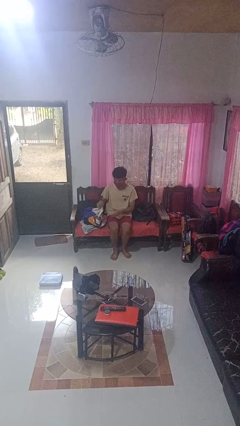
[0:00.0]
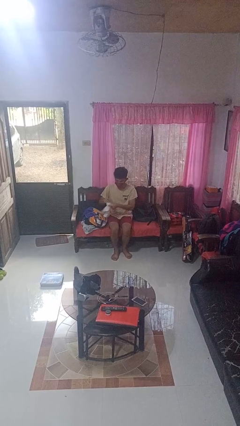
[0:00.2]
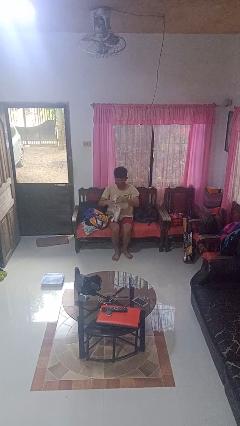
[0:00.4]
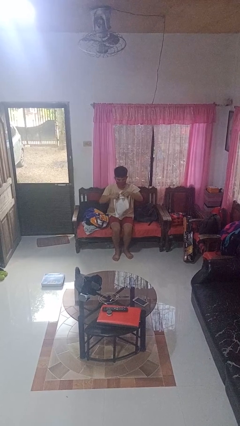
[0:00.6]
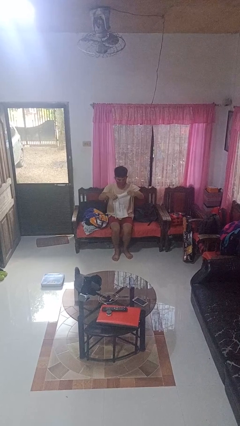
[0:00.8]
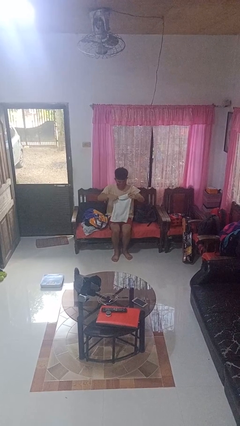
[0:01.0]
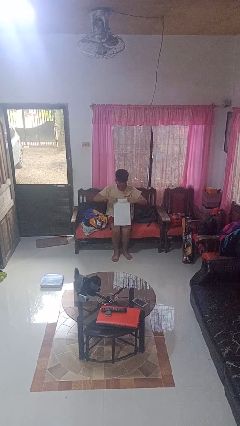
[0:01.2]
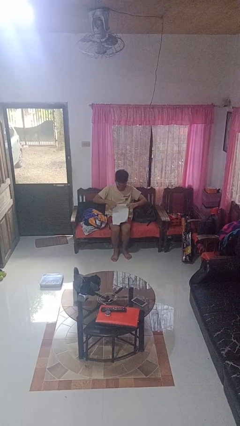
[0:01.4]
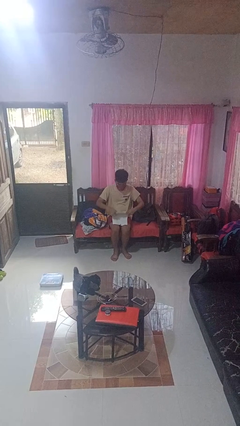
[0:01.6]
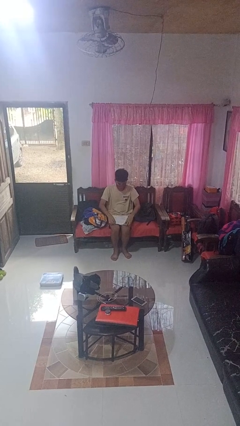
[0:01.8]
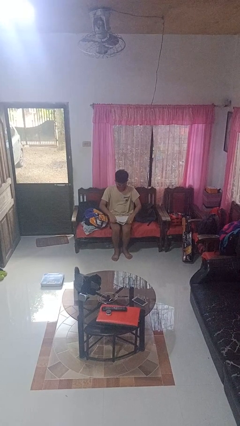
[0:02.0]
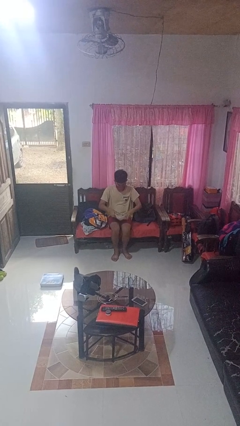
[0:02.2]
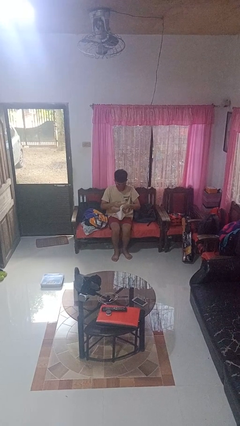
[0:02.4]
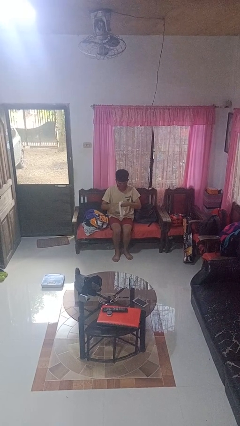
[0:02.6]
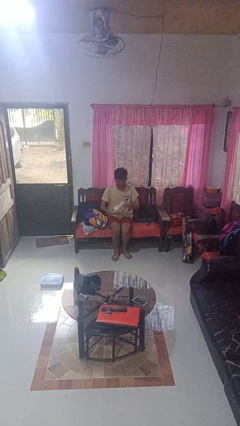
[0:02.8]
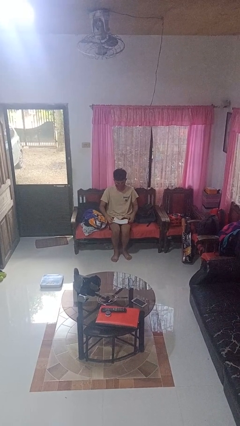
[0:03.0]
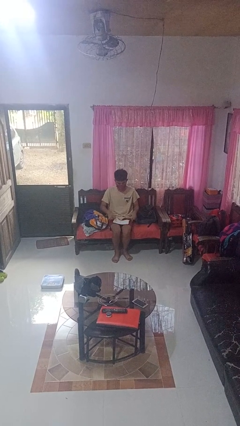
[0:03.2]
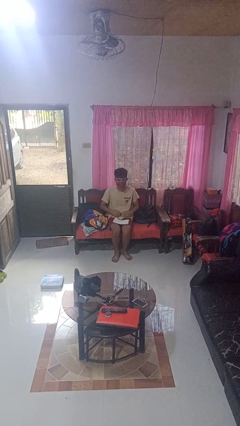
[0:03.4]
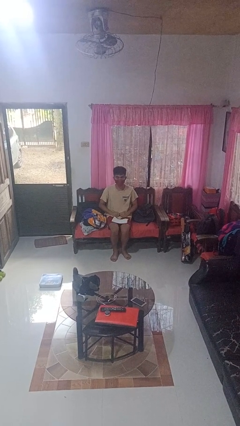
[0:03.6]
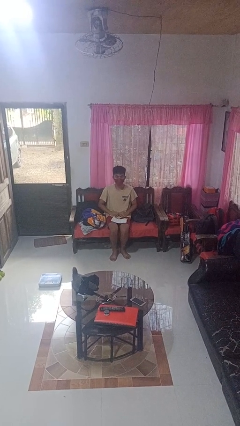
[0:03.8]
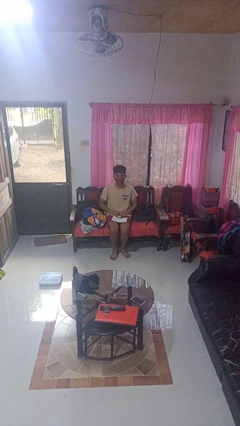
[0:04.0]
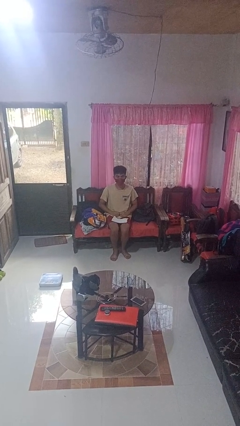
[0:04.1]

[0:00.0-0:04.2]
person folds towel

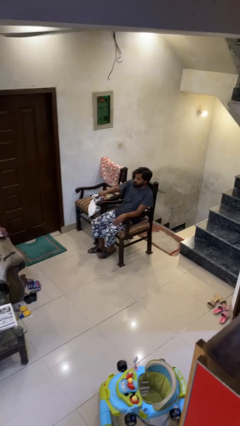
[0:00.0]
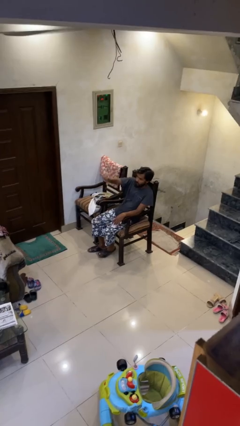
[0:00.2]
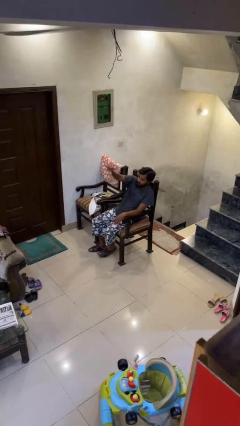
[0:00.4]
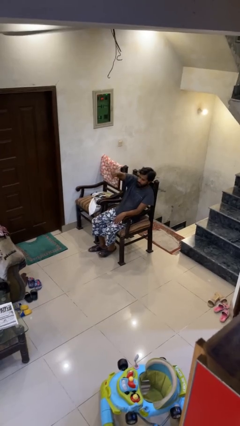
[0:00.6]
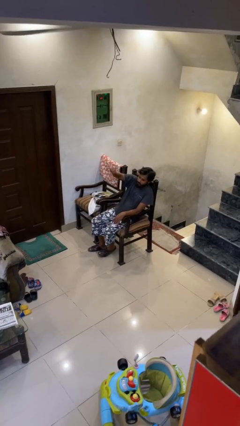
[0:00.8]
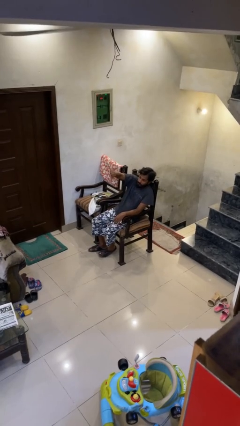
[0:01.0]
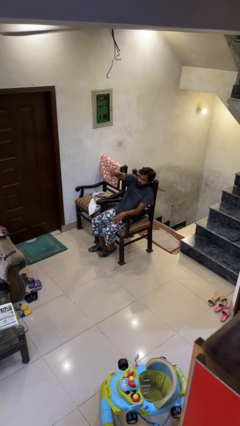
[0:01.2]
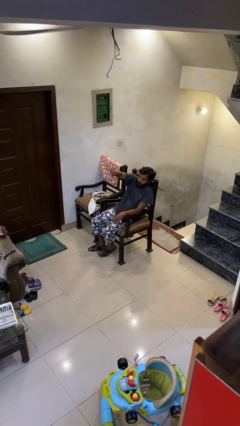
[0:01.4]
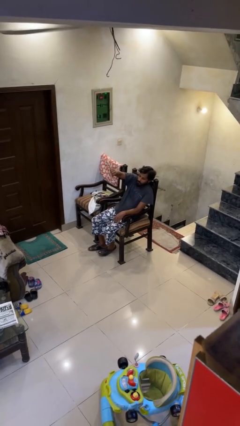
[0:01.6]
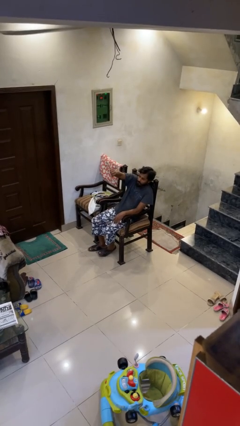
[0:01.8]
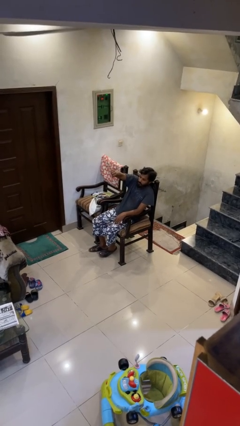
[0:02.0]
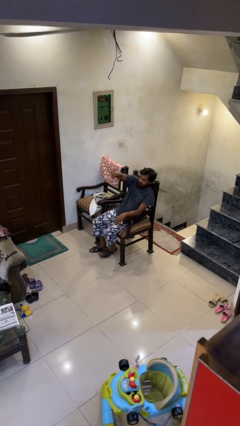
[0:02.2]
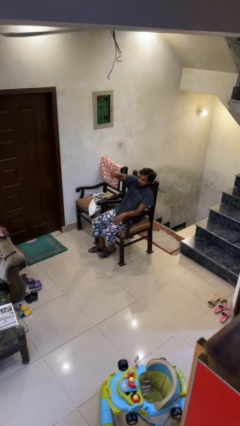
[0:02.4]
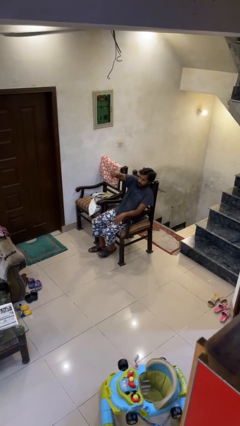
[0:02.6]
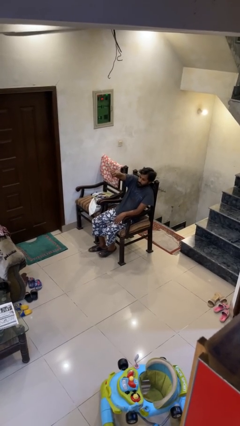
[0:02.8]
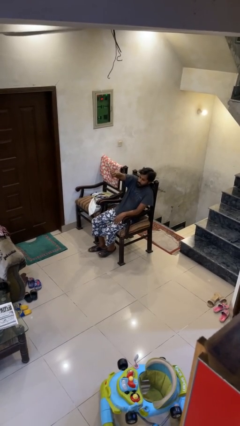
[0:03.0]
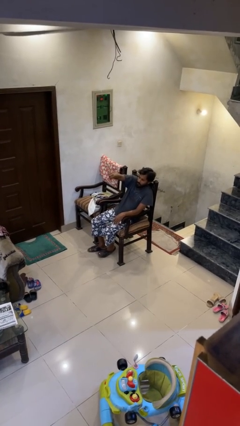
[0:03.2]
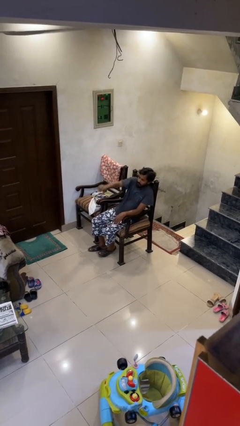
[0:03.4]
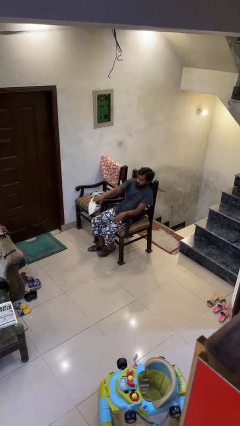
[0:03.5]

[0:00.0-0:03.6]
person gestures thumbs down

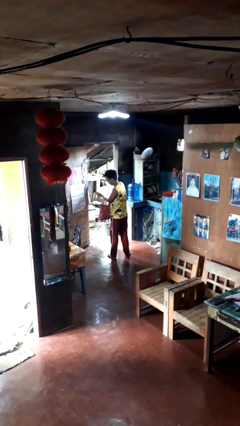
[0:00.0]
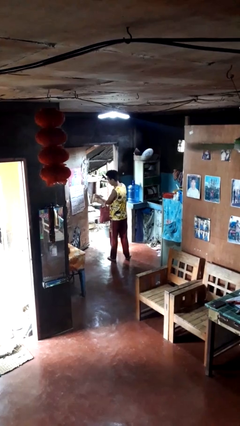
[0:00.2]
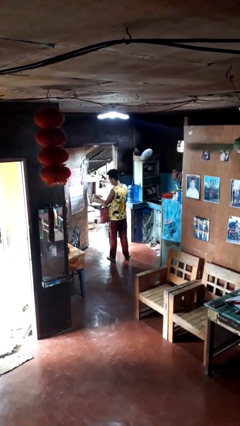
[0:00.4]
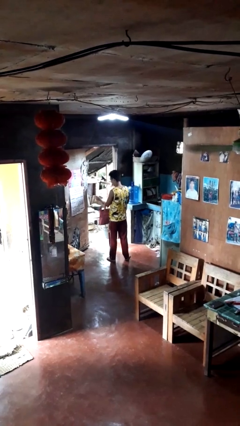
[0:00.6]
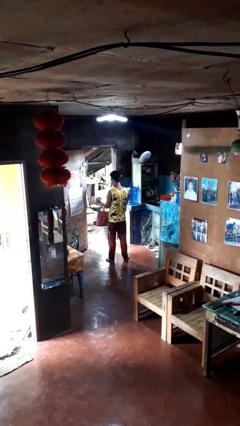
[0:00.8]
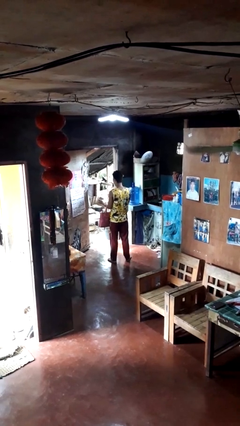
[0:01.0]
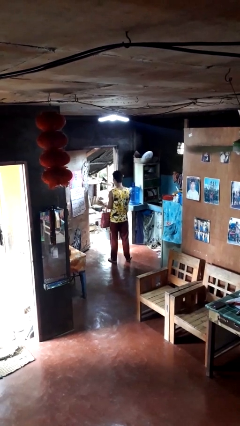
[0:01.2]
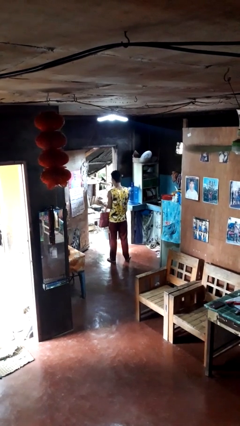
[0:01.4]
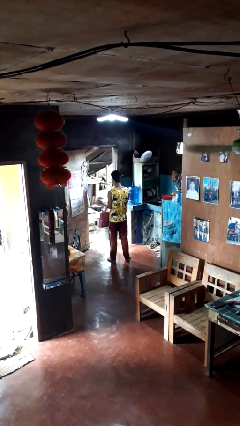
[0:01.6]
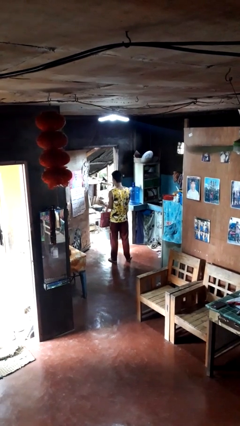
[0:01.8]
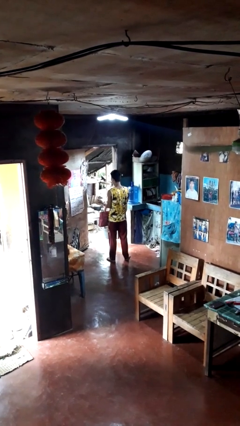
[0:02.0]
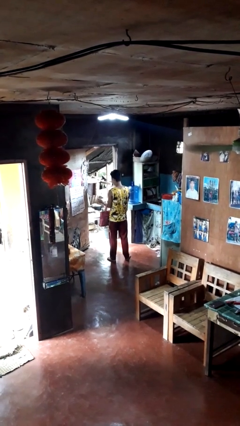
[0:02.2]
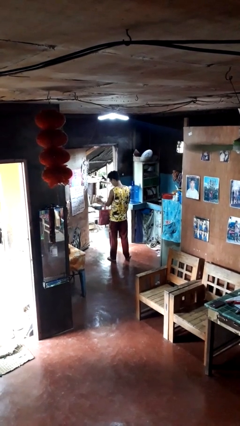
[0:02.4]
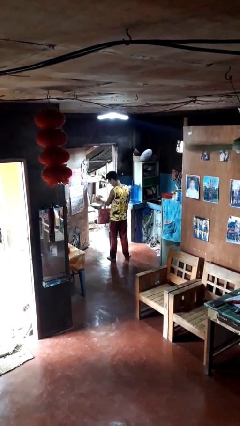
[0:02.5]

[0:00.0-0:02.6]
person takes object from purse

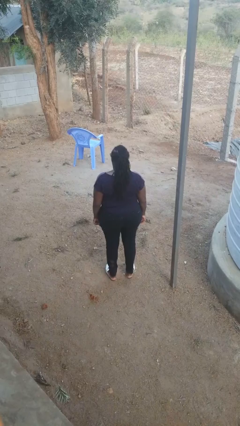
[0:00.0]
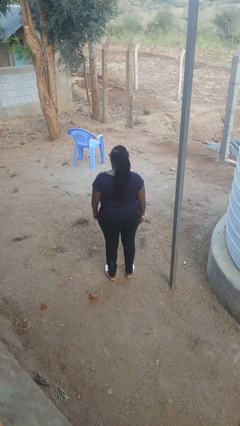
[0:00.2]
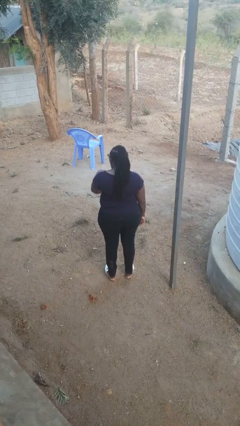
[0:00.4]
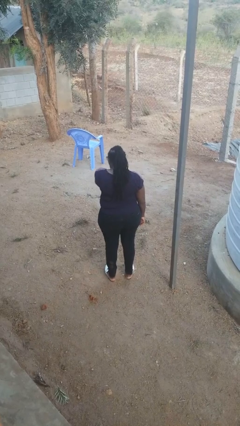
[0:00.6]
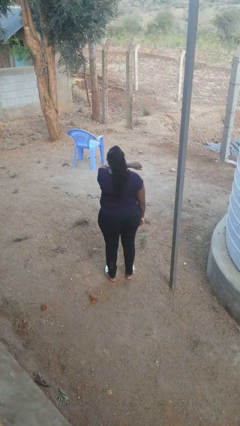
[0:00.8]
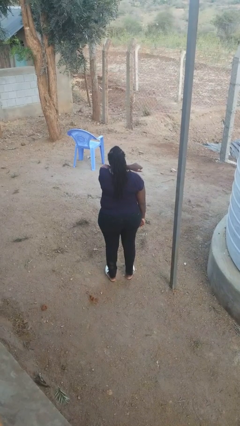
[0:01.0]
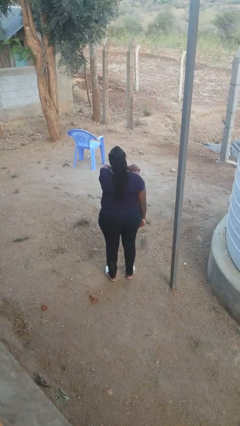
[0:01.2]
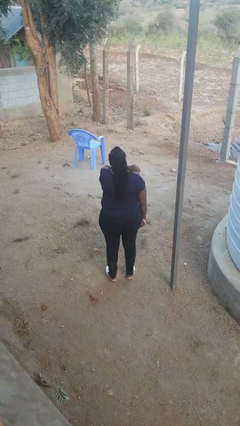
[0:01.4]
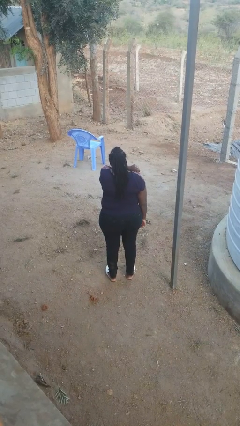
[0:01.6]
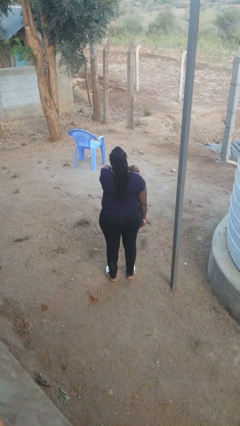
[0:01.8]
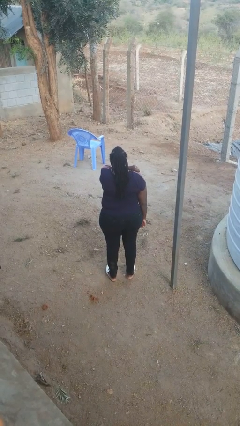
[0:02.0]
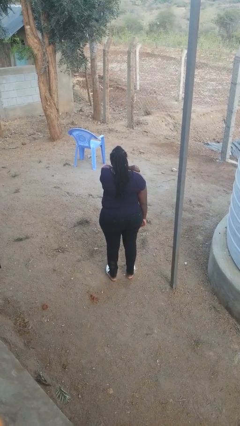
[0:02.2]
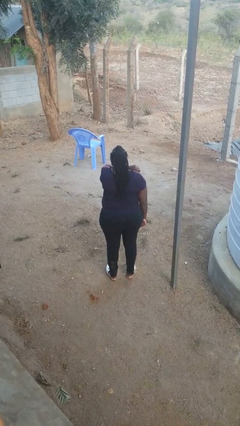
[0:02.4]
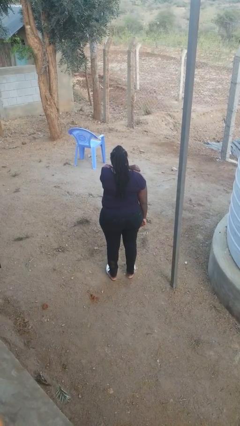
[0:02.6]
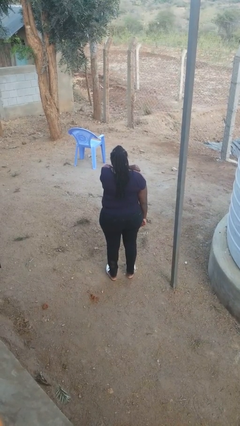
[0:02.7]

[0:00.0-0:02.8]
person sneezes into arm

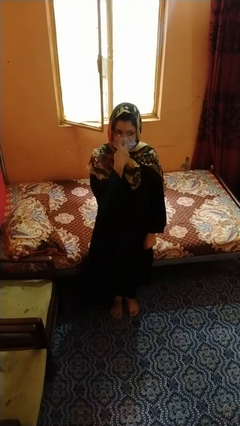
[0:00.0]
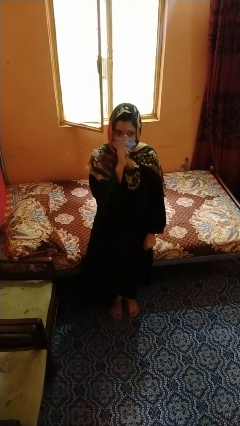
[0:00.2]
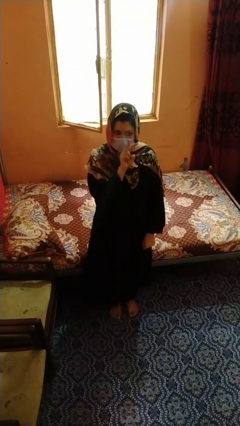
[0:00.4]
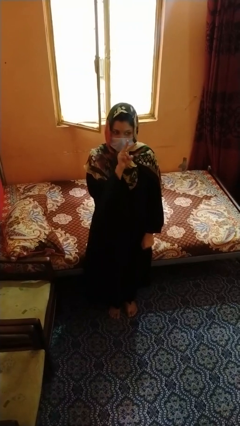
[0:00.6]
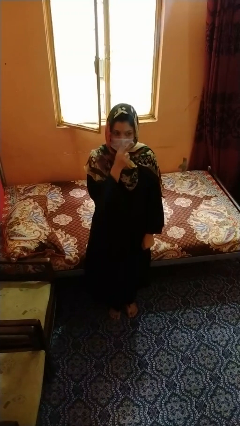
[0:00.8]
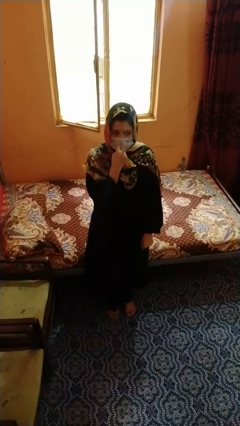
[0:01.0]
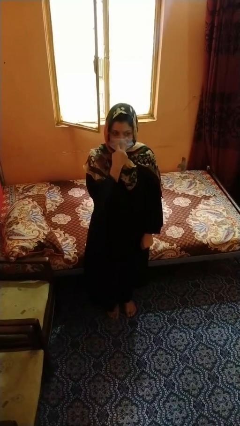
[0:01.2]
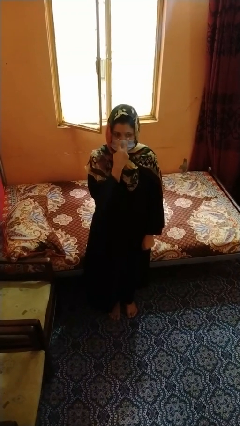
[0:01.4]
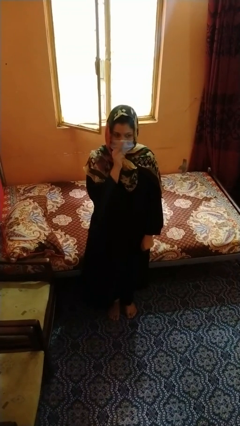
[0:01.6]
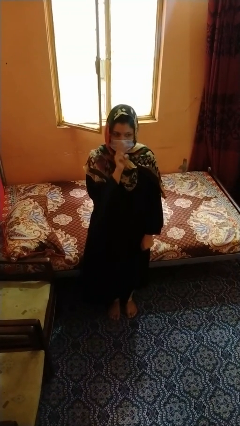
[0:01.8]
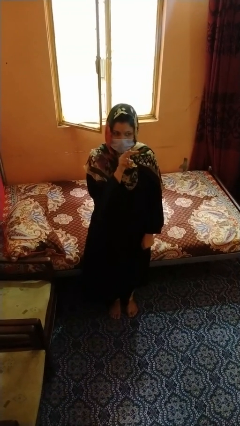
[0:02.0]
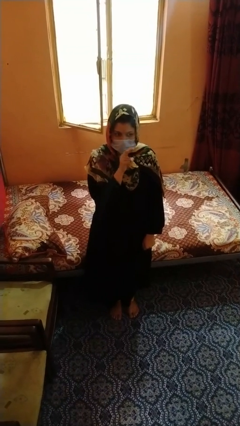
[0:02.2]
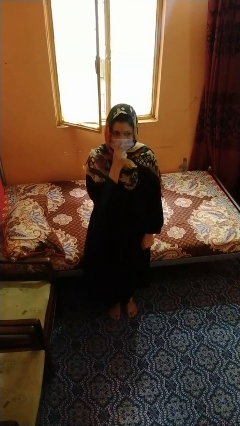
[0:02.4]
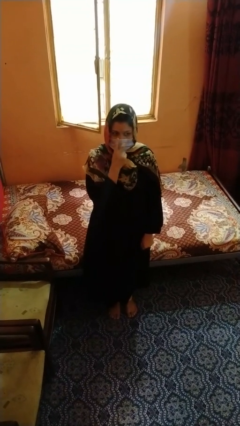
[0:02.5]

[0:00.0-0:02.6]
person gestures watch closely

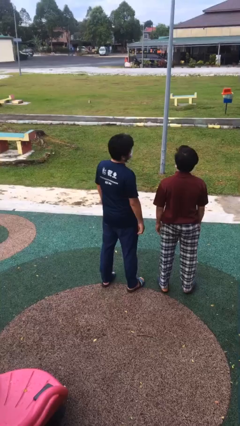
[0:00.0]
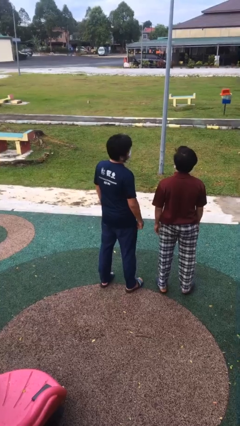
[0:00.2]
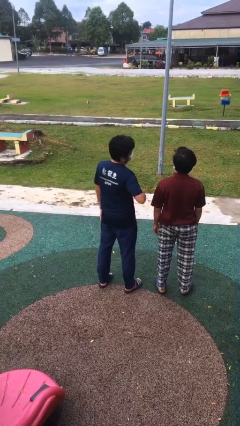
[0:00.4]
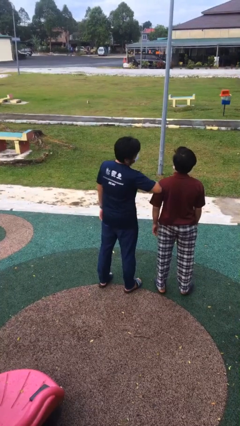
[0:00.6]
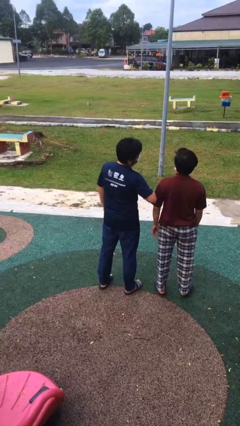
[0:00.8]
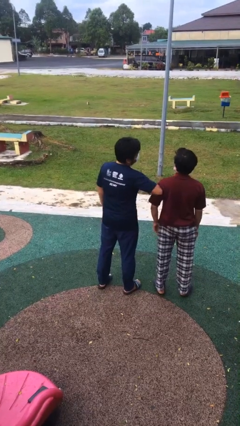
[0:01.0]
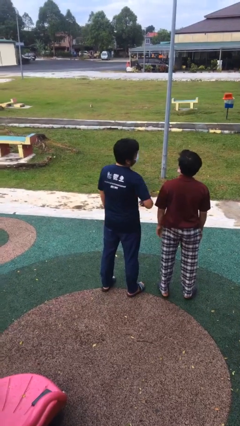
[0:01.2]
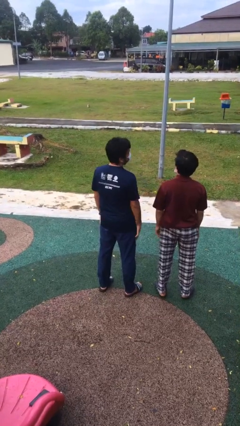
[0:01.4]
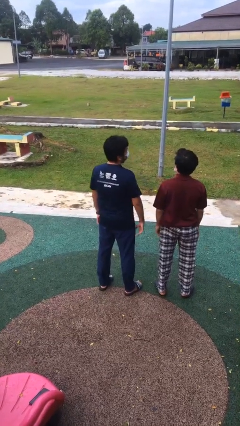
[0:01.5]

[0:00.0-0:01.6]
person nudges person with elbow
